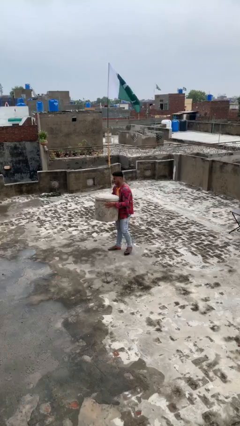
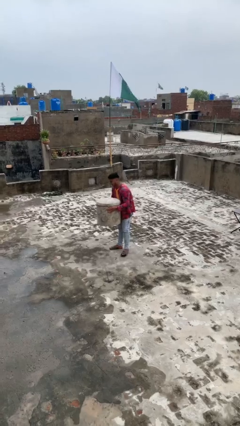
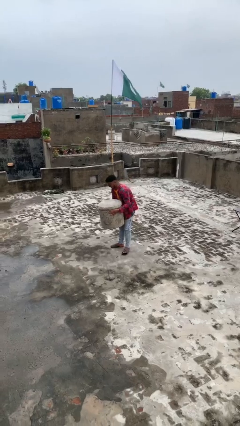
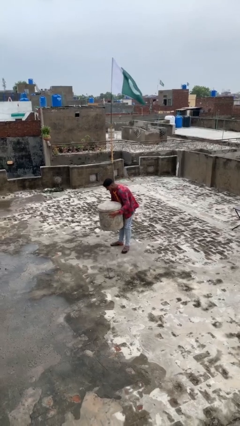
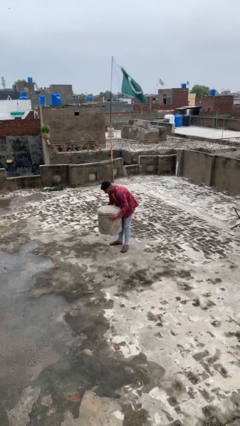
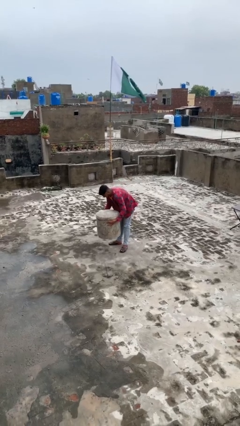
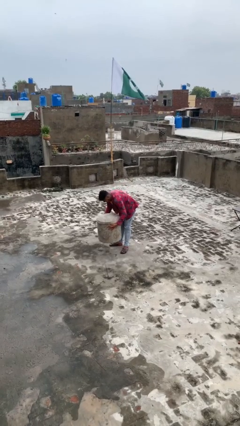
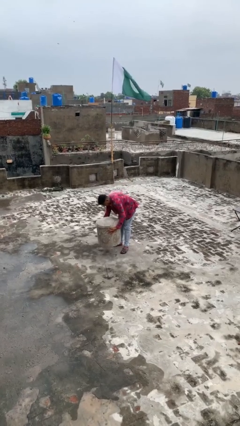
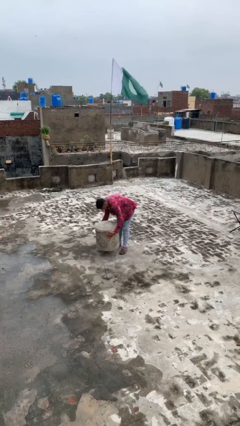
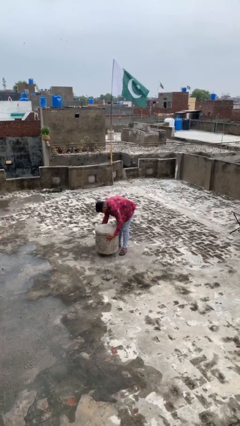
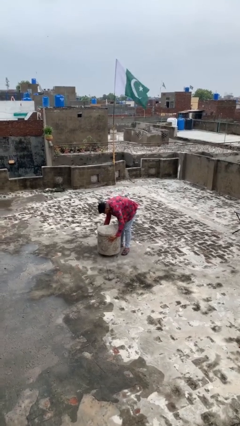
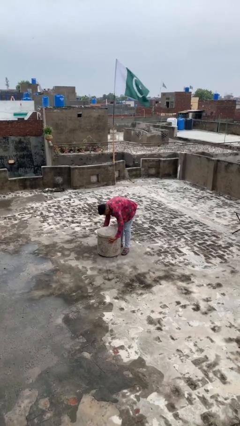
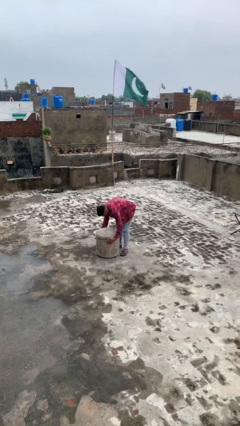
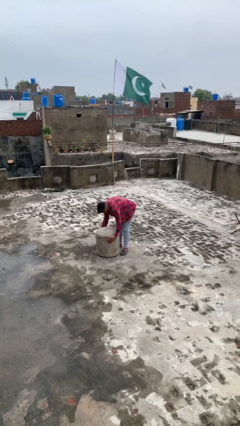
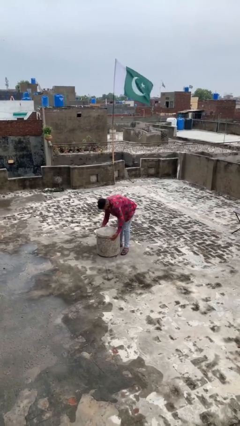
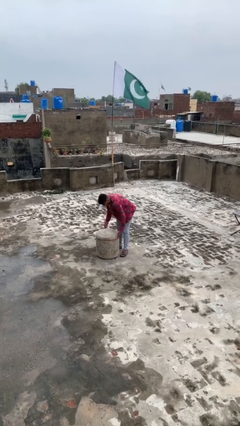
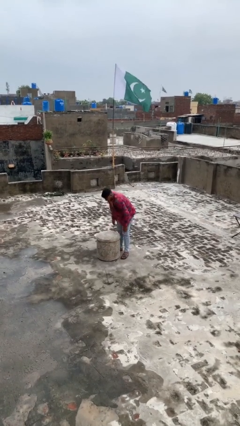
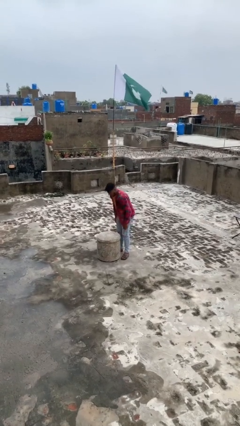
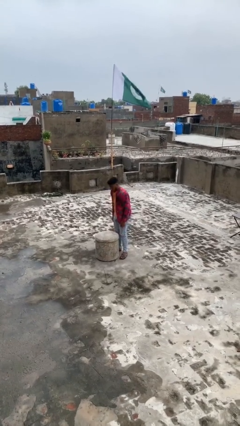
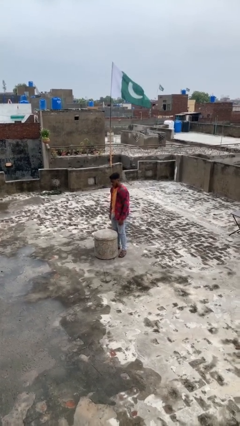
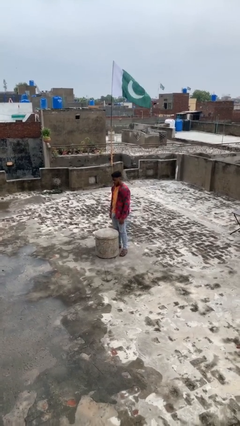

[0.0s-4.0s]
person puts down object on floor

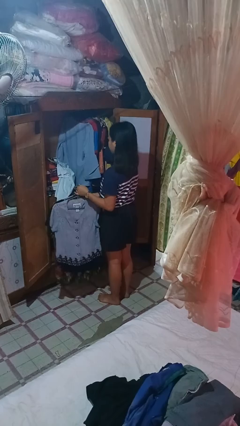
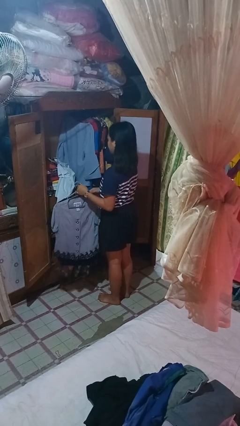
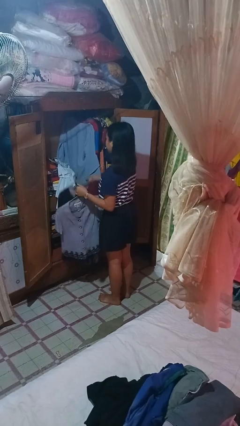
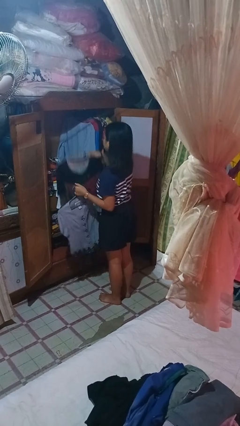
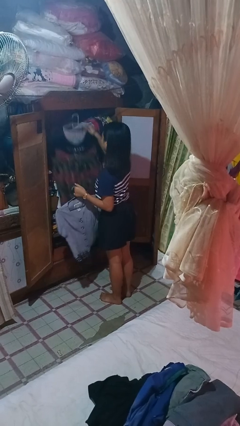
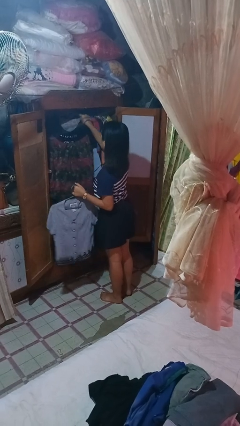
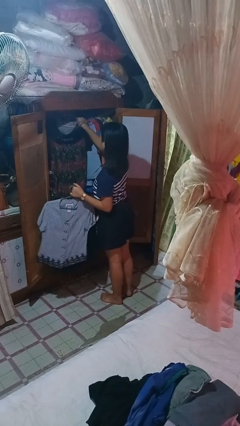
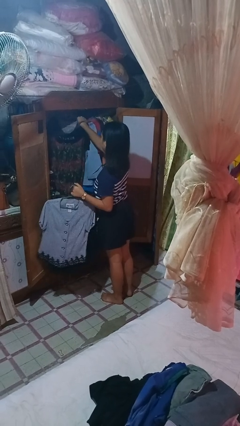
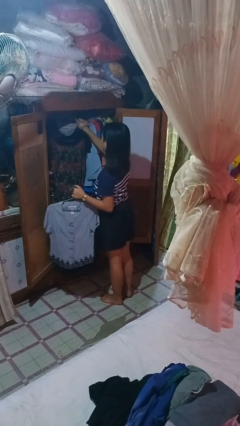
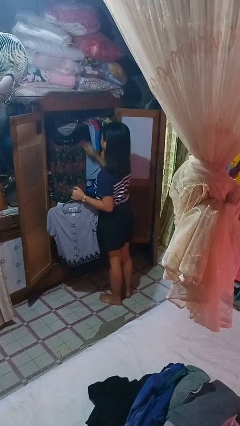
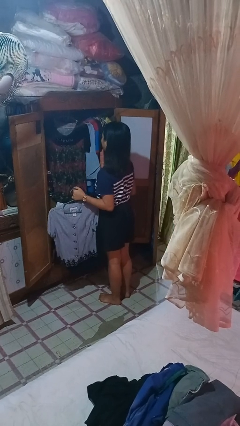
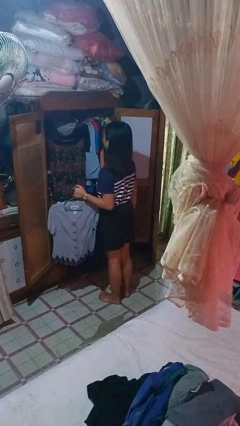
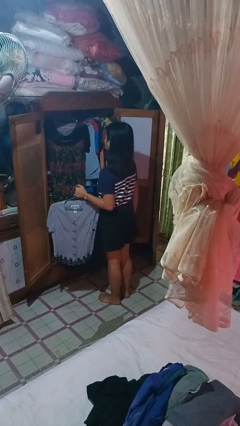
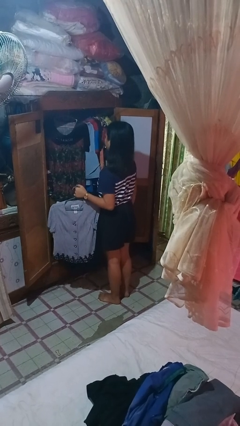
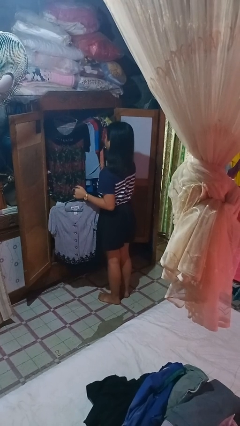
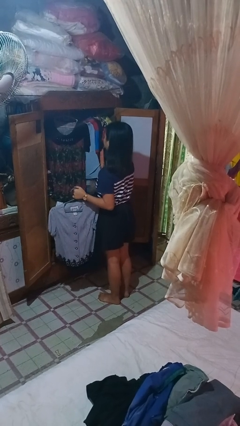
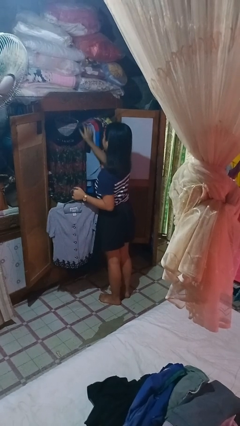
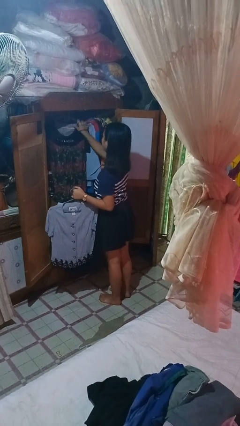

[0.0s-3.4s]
person puts clothes into closet

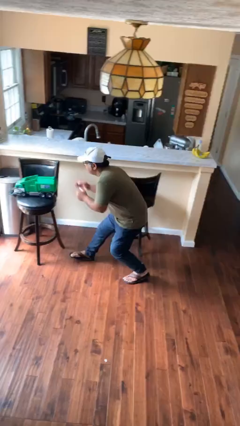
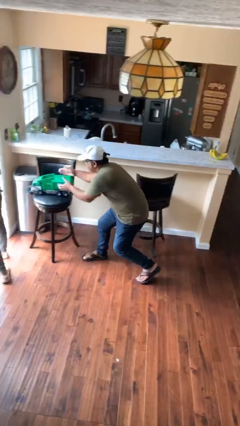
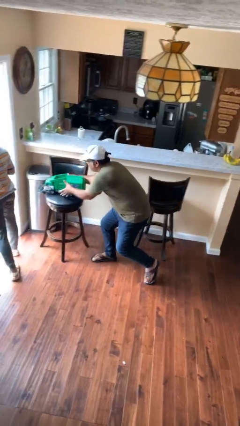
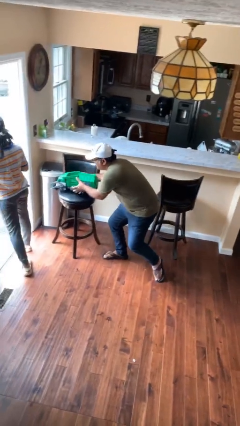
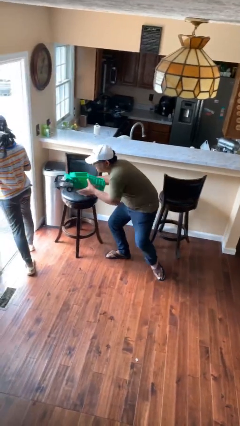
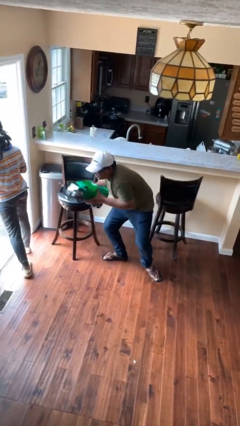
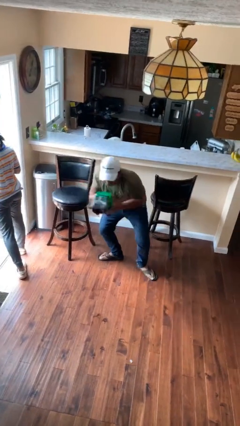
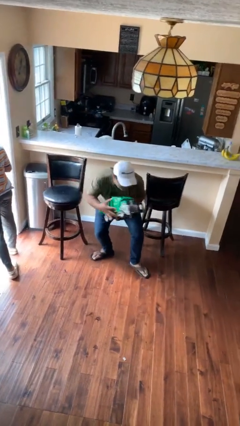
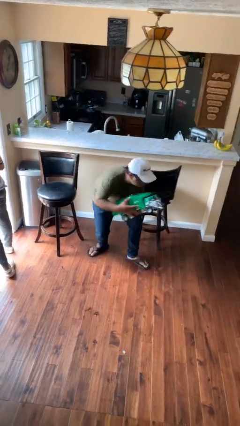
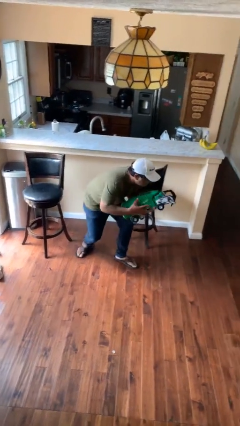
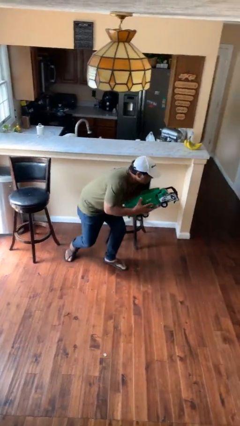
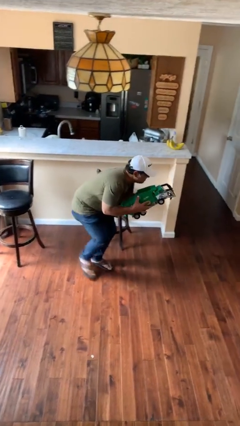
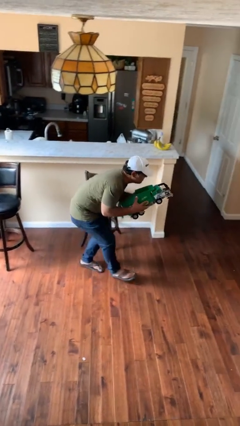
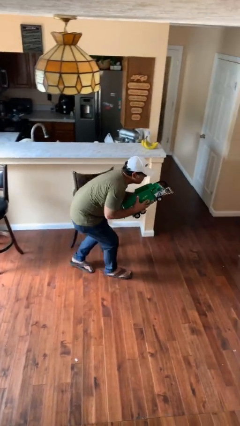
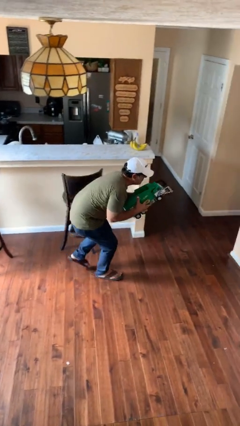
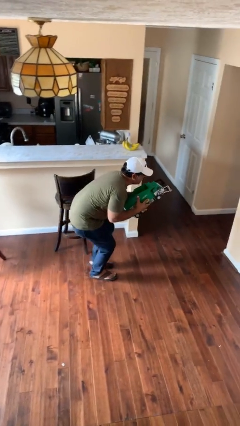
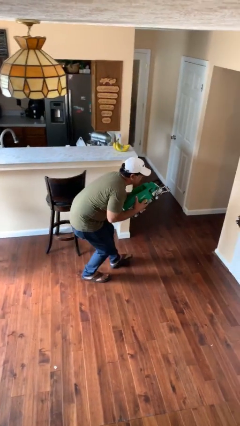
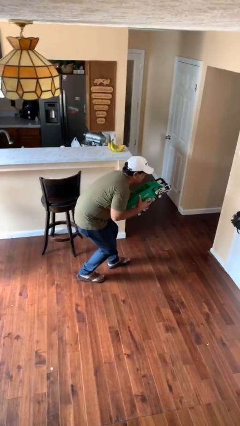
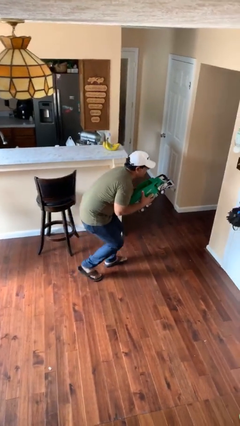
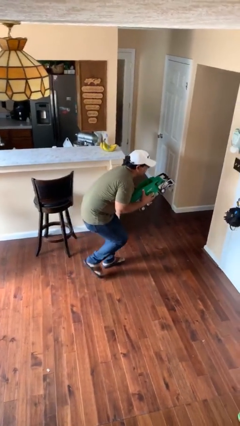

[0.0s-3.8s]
person steals object from person

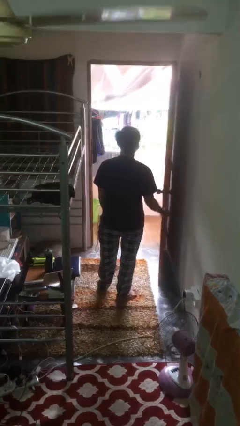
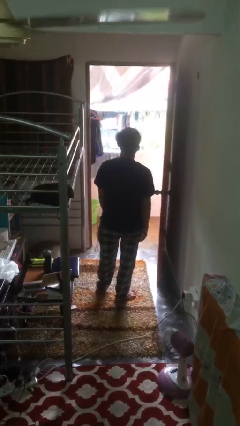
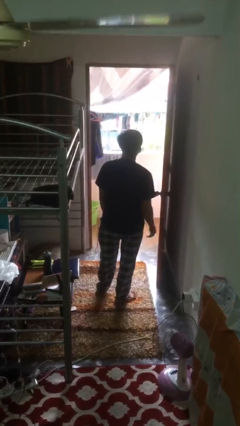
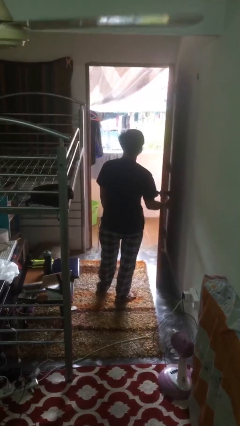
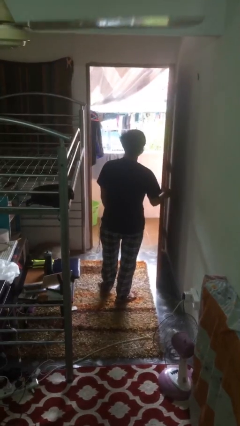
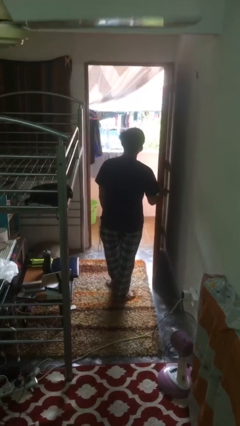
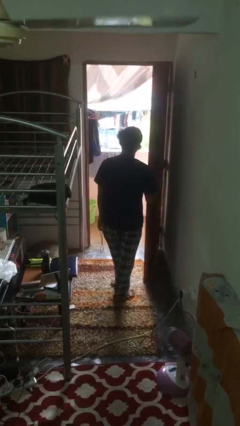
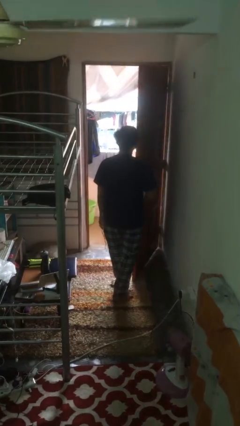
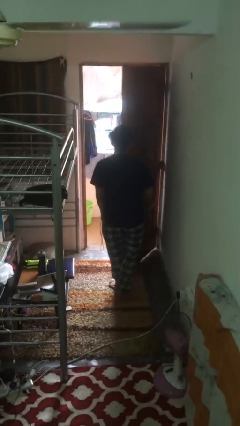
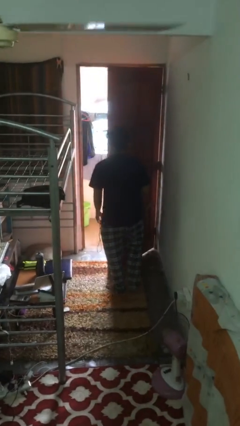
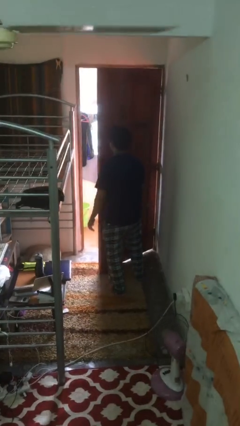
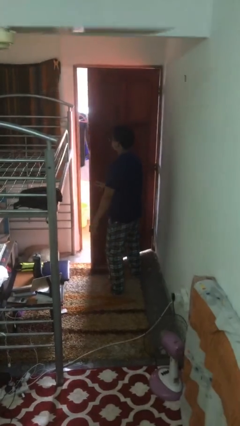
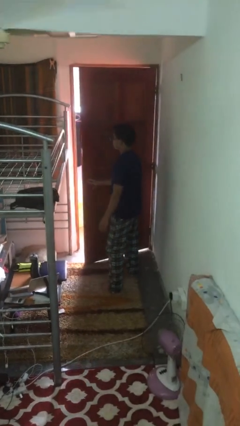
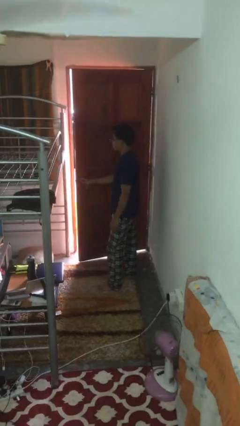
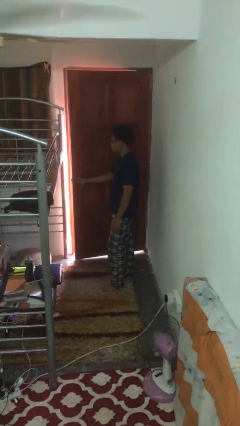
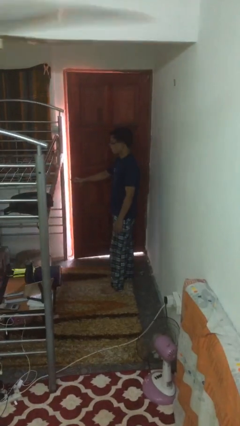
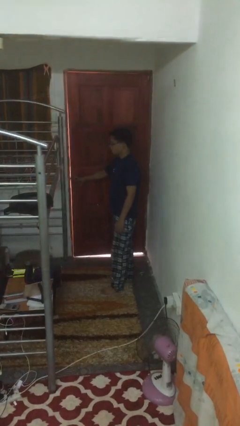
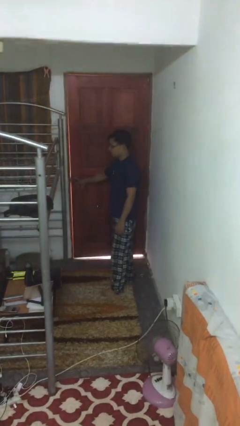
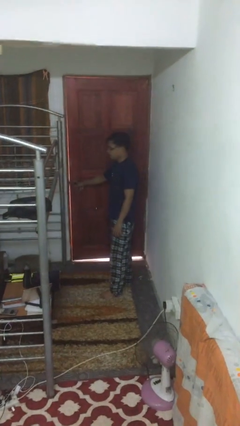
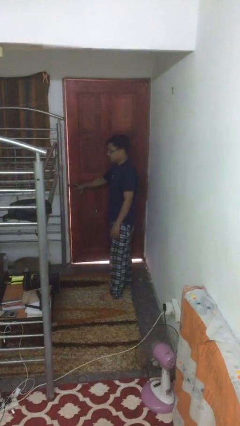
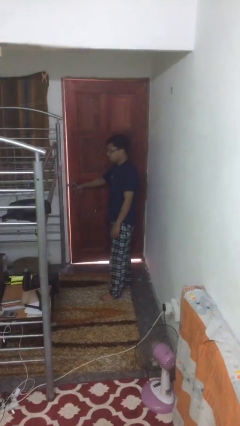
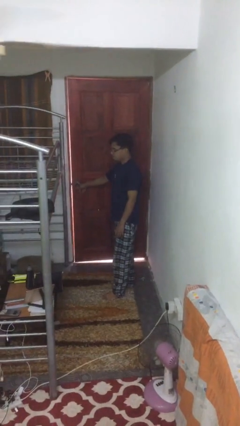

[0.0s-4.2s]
person closes facility door

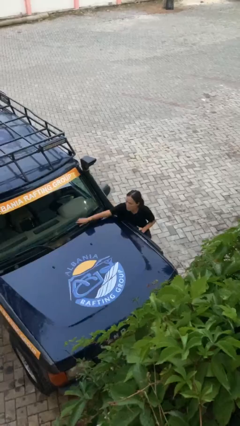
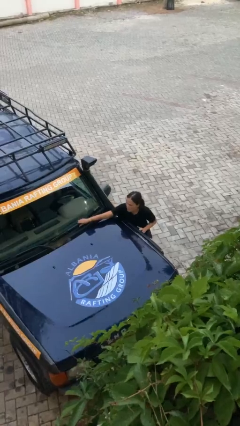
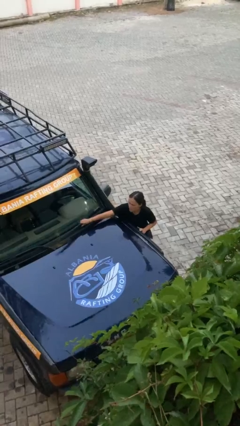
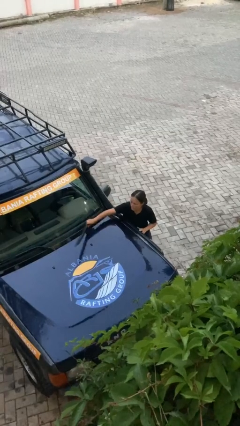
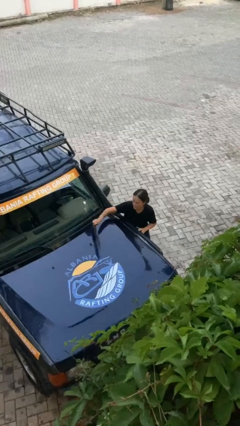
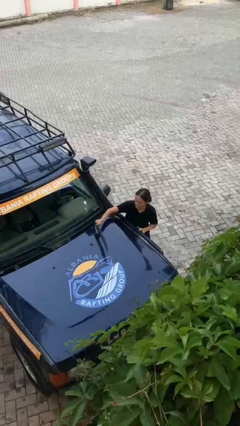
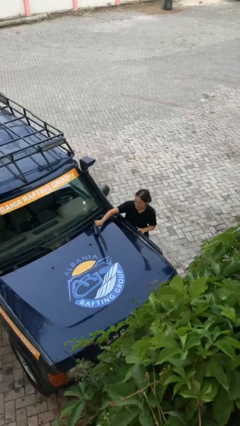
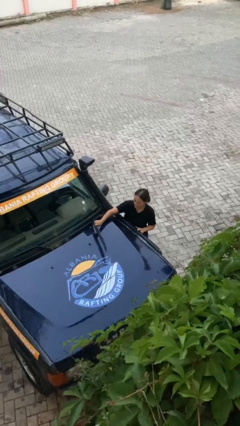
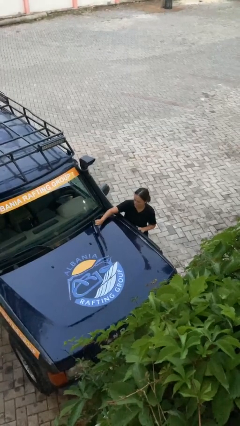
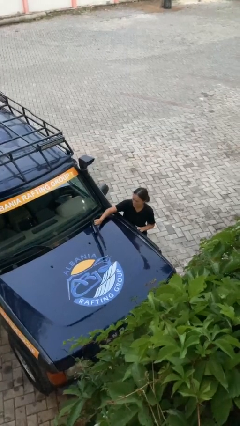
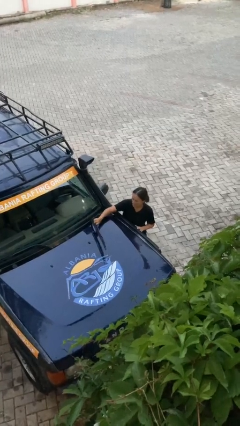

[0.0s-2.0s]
person flips up car wipers

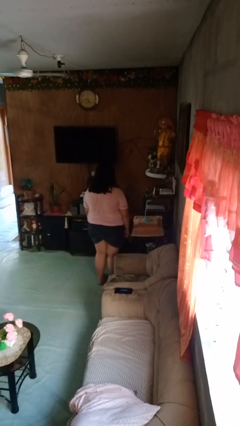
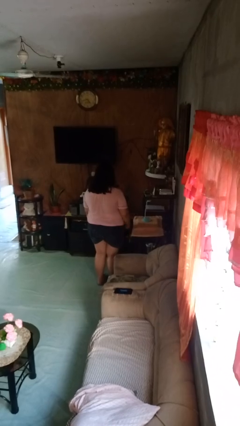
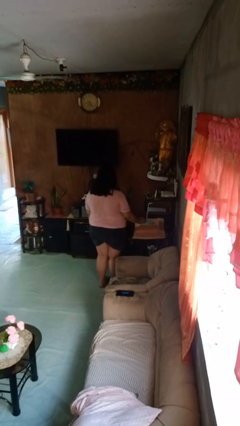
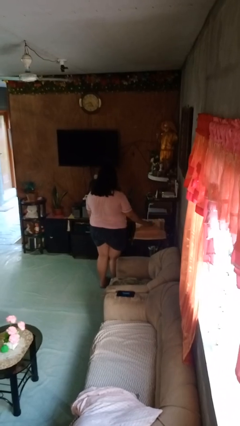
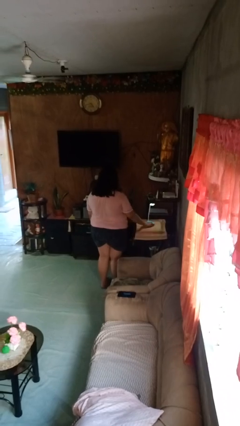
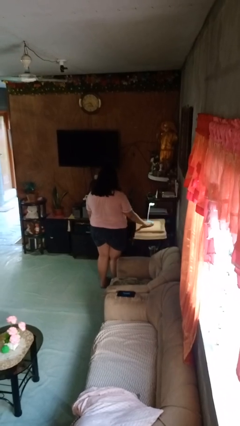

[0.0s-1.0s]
person turns on lamp
